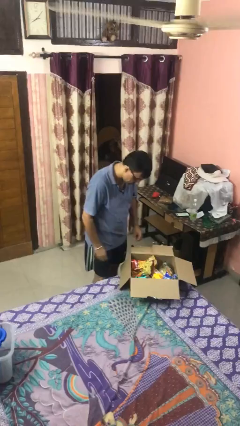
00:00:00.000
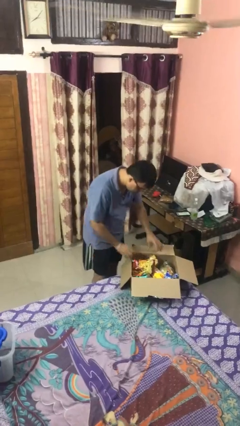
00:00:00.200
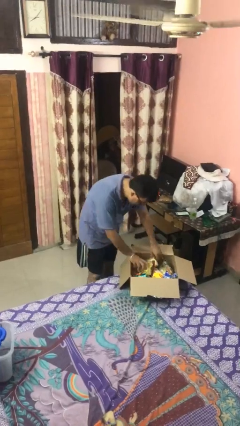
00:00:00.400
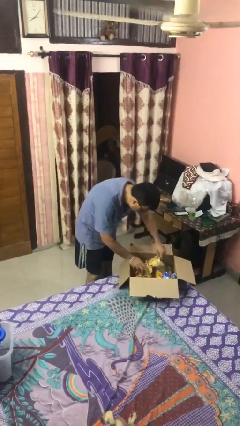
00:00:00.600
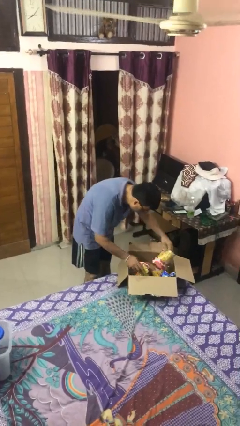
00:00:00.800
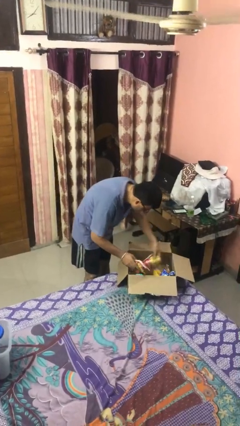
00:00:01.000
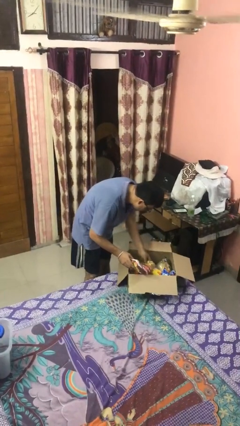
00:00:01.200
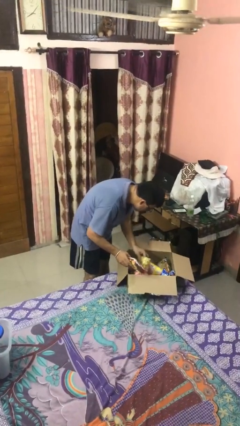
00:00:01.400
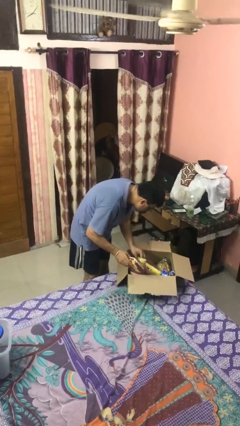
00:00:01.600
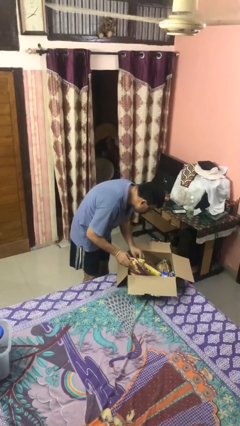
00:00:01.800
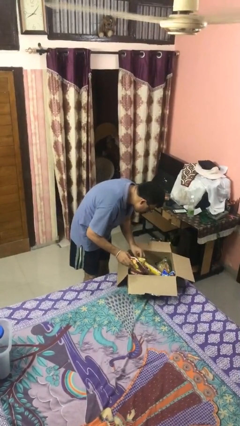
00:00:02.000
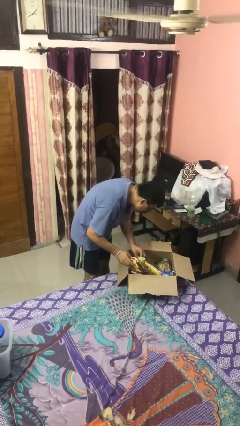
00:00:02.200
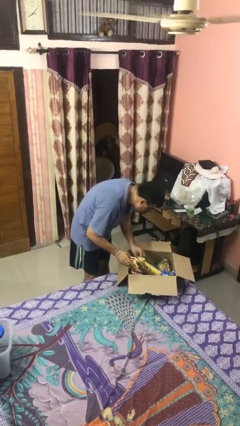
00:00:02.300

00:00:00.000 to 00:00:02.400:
person searches in box

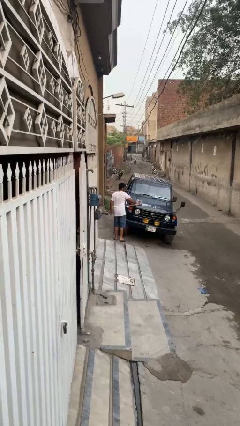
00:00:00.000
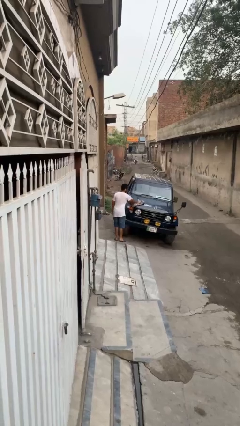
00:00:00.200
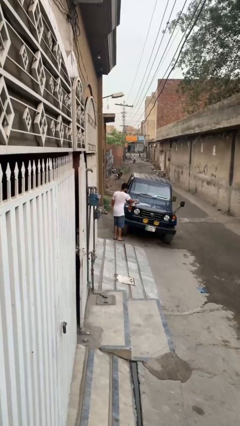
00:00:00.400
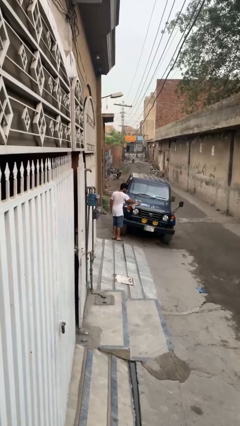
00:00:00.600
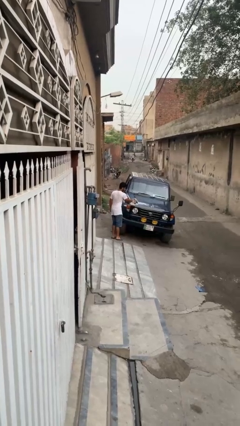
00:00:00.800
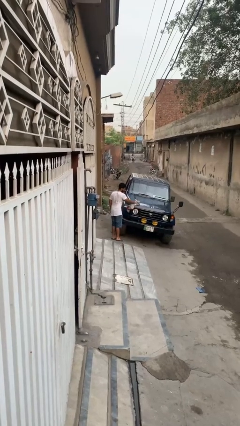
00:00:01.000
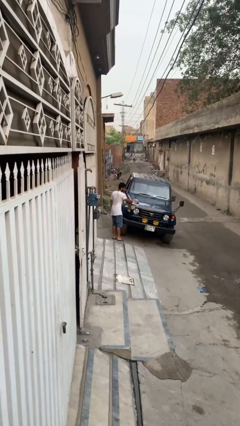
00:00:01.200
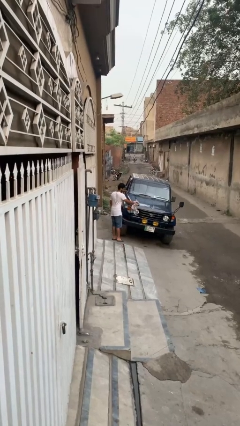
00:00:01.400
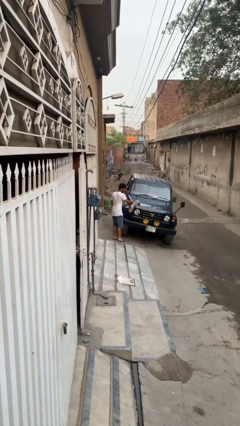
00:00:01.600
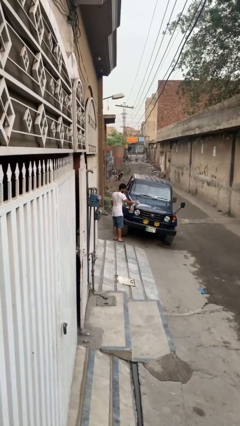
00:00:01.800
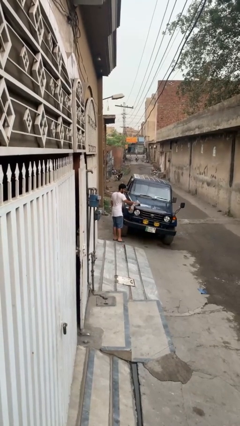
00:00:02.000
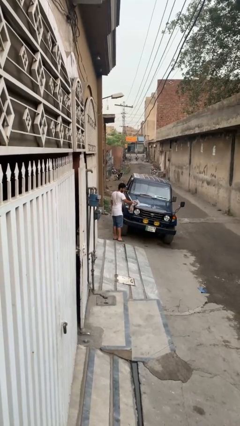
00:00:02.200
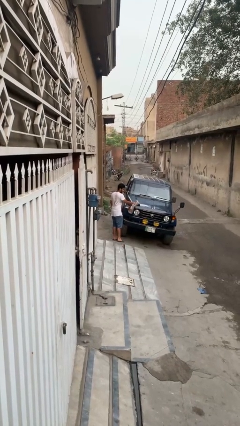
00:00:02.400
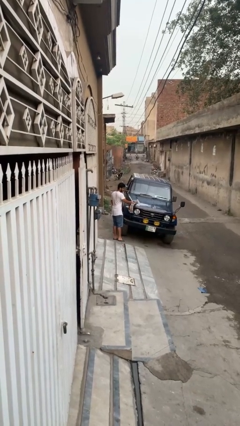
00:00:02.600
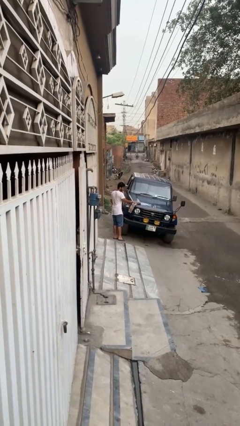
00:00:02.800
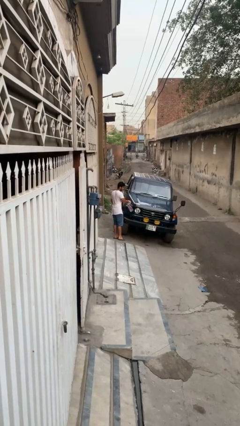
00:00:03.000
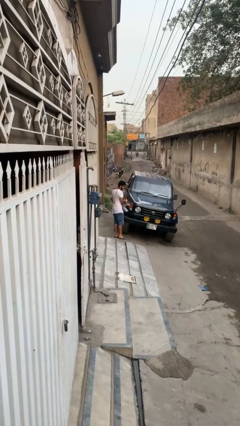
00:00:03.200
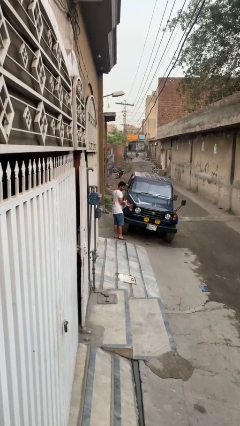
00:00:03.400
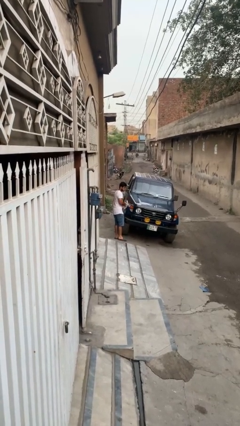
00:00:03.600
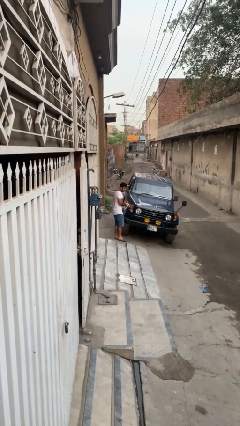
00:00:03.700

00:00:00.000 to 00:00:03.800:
person polishes car with rag

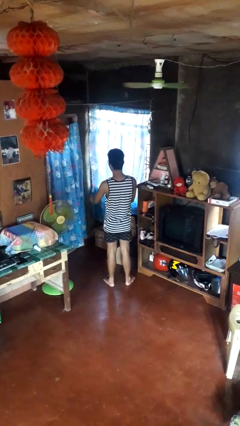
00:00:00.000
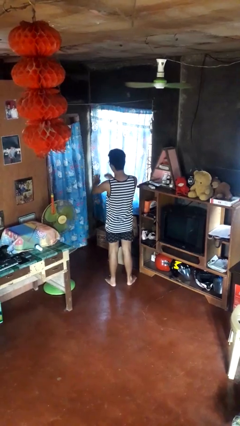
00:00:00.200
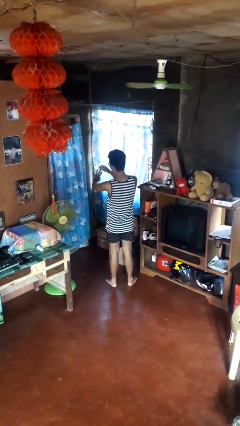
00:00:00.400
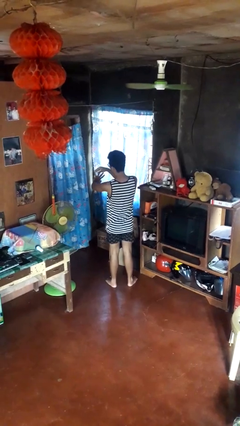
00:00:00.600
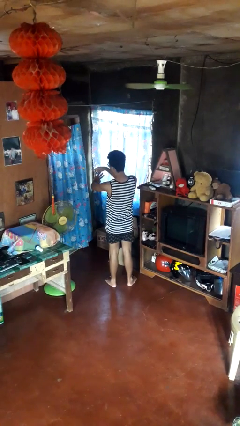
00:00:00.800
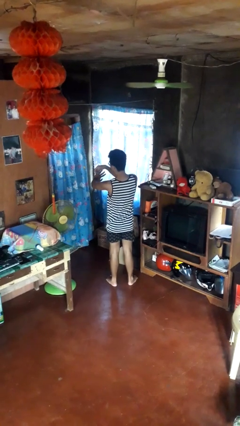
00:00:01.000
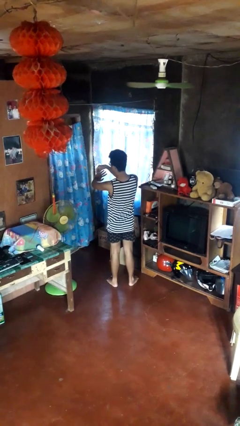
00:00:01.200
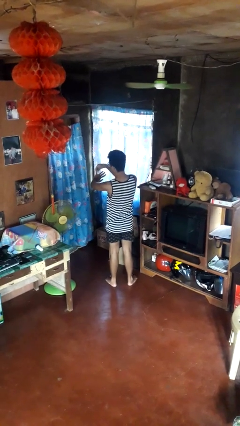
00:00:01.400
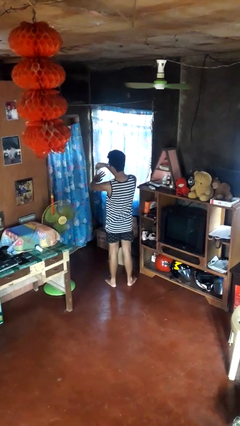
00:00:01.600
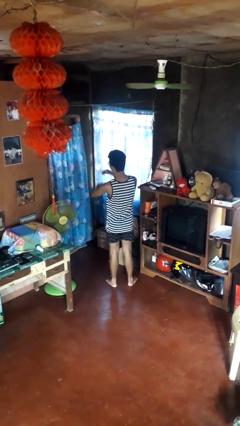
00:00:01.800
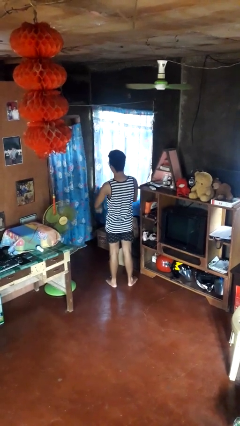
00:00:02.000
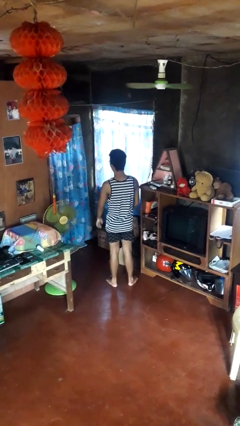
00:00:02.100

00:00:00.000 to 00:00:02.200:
person takes off ring

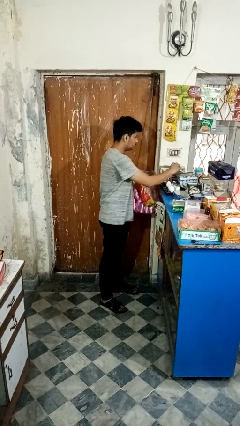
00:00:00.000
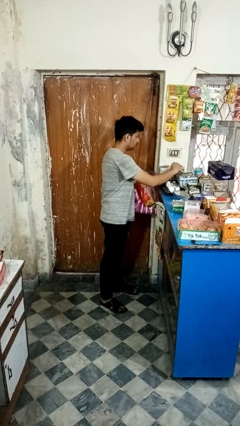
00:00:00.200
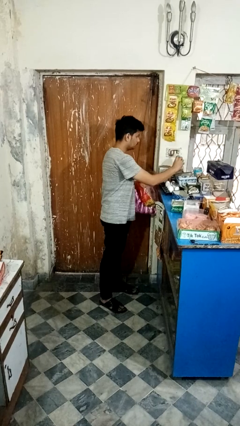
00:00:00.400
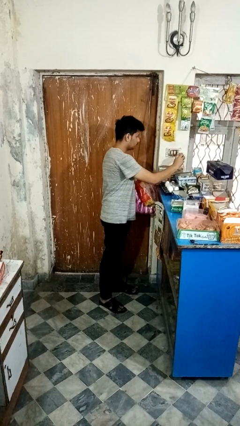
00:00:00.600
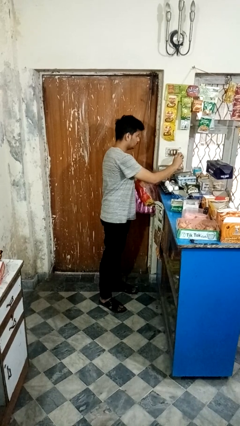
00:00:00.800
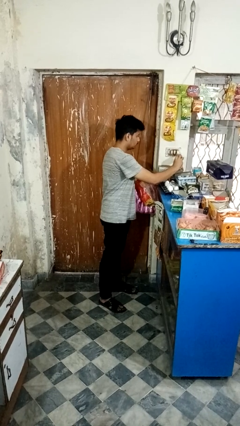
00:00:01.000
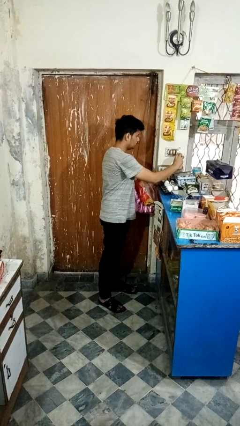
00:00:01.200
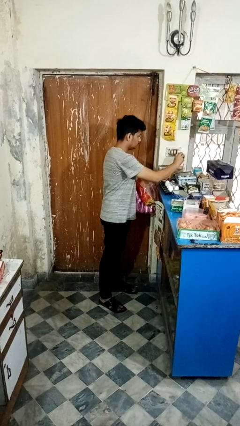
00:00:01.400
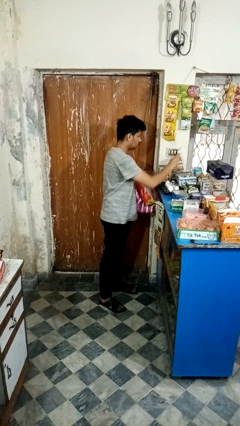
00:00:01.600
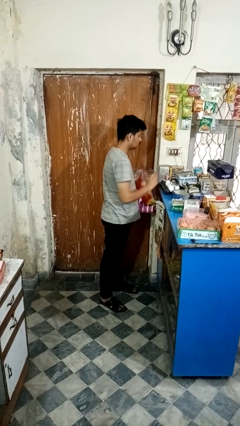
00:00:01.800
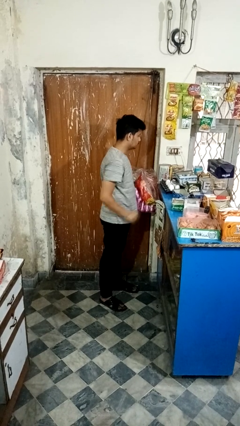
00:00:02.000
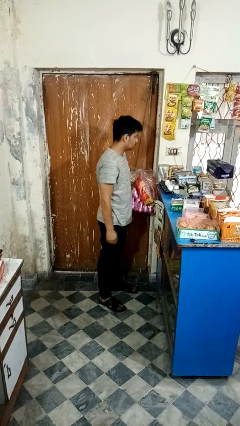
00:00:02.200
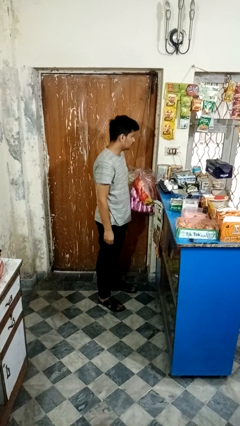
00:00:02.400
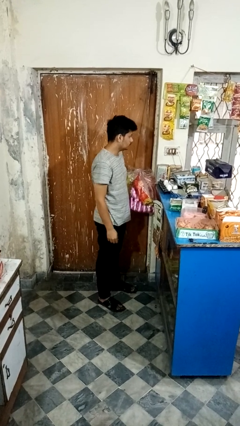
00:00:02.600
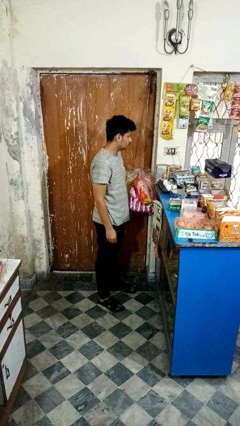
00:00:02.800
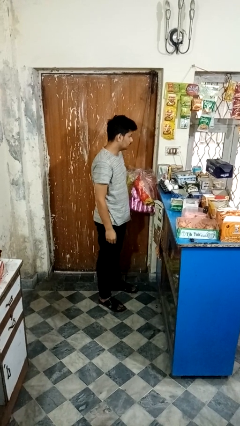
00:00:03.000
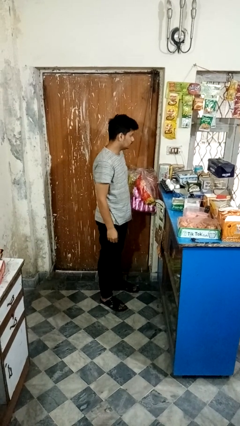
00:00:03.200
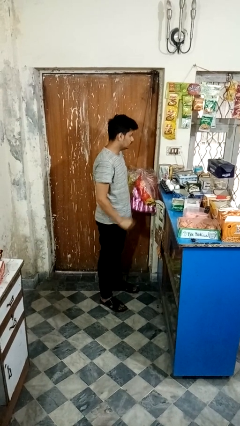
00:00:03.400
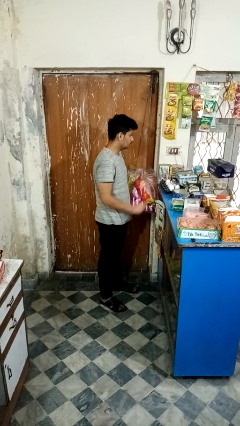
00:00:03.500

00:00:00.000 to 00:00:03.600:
person plugs into electrical socket

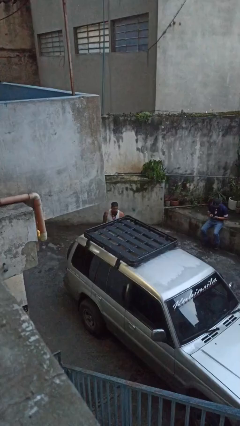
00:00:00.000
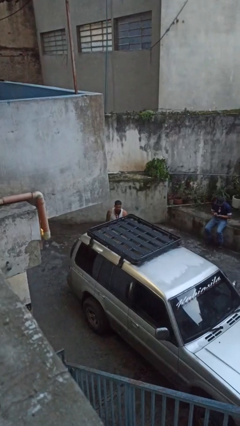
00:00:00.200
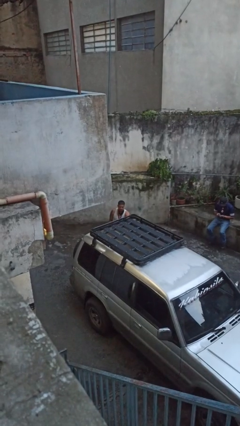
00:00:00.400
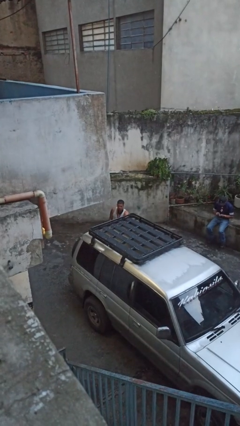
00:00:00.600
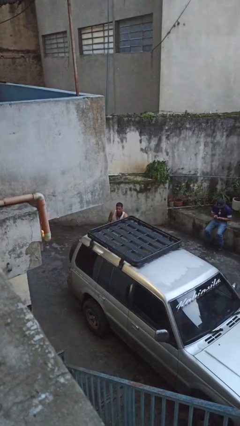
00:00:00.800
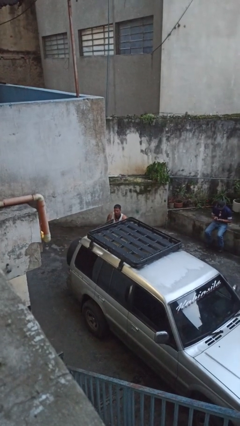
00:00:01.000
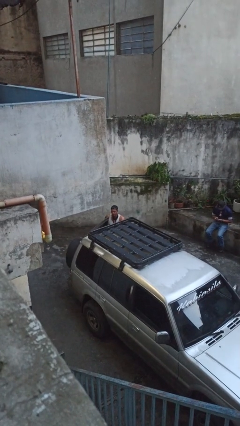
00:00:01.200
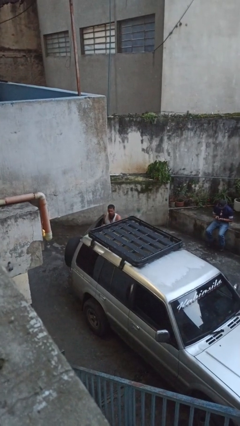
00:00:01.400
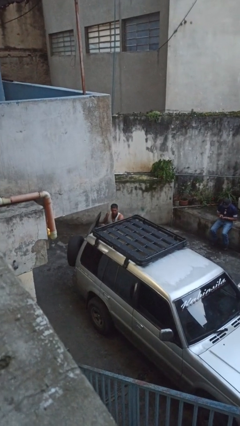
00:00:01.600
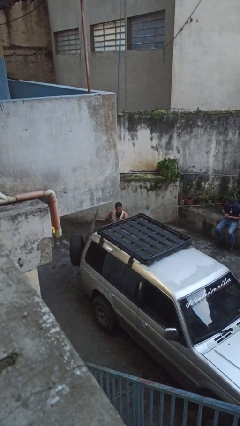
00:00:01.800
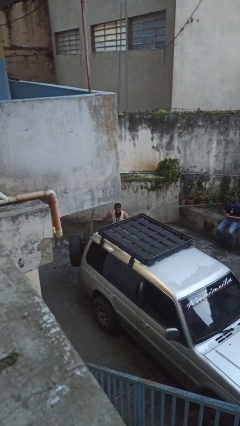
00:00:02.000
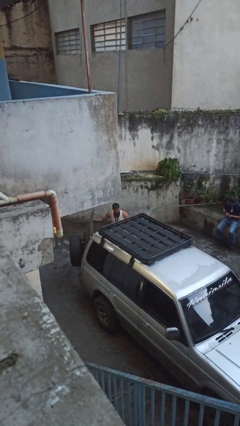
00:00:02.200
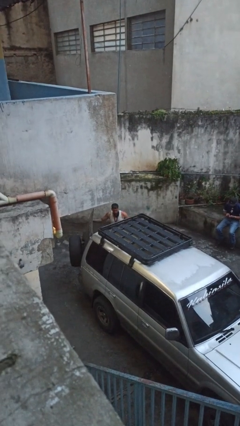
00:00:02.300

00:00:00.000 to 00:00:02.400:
person opens car trunk

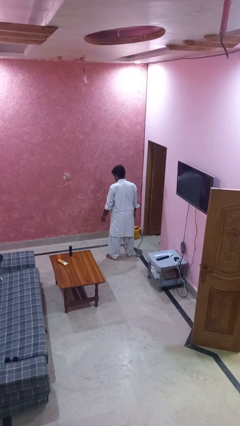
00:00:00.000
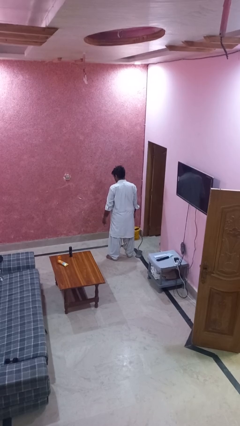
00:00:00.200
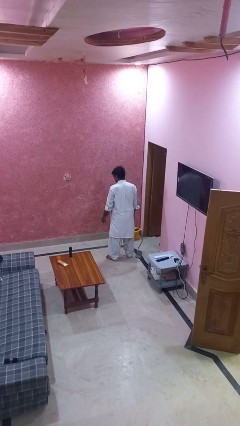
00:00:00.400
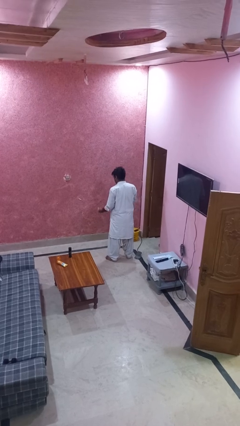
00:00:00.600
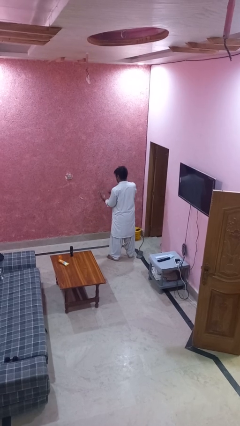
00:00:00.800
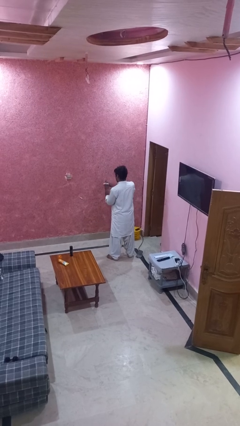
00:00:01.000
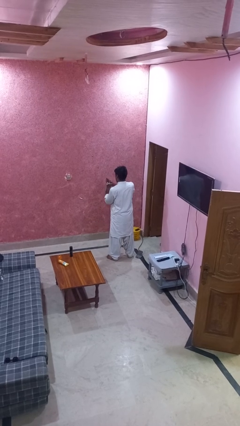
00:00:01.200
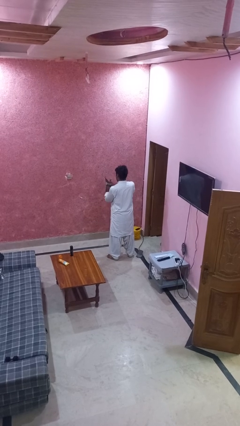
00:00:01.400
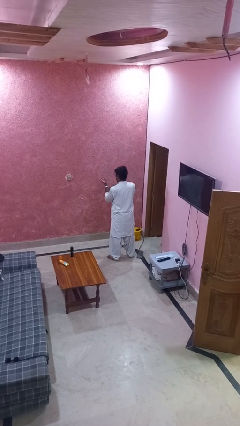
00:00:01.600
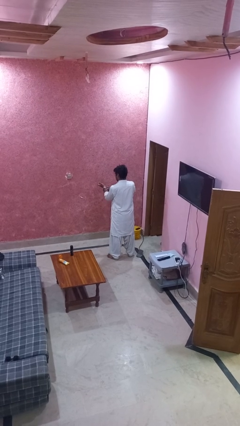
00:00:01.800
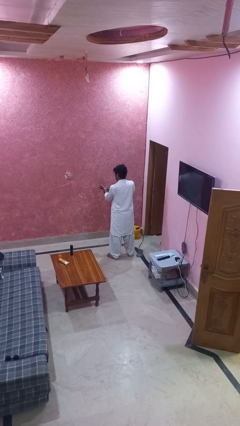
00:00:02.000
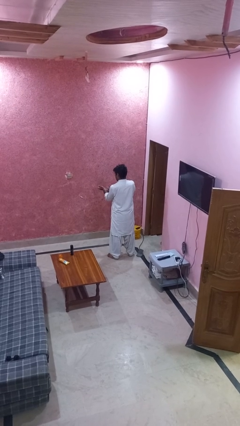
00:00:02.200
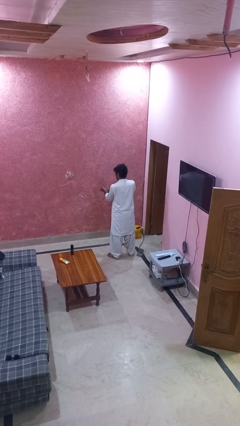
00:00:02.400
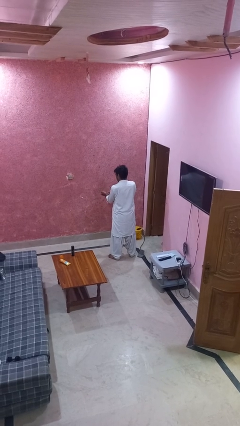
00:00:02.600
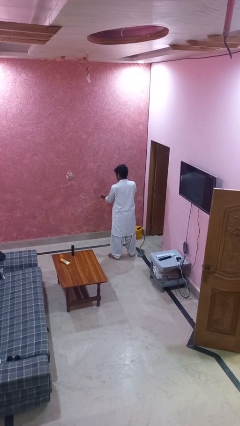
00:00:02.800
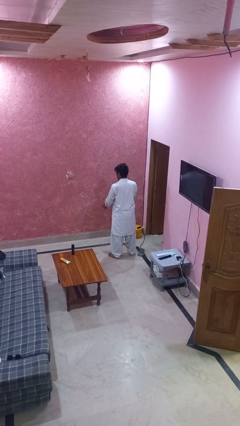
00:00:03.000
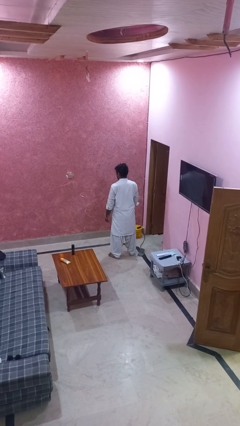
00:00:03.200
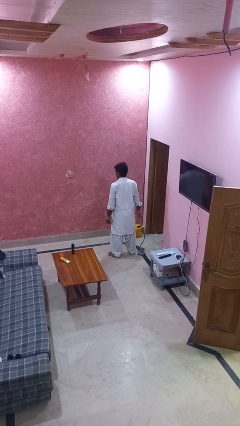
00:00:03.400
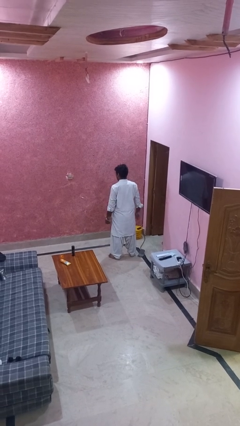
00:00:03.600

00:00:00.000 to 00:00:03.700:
person puts on wristwatch
